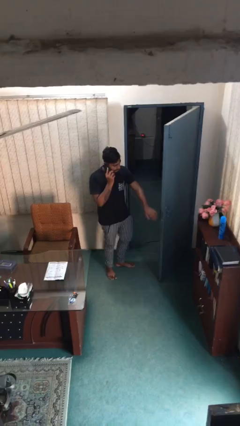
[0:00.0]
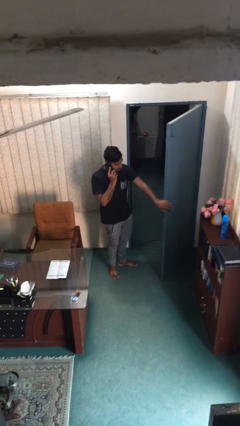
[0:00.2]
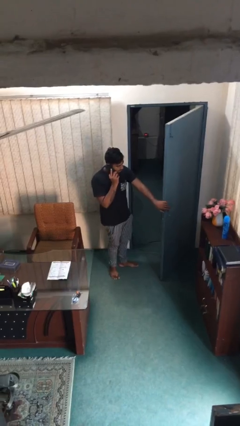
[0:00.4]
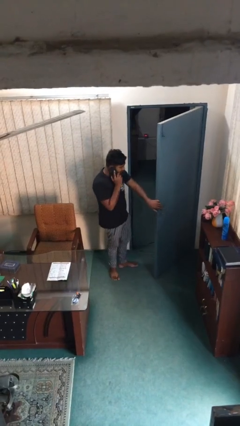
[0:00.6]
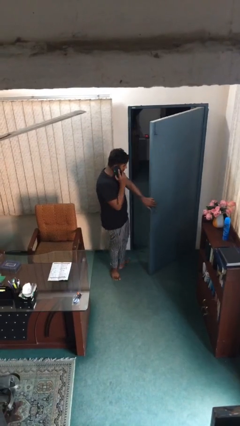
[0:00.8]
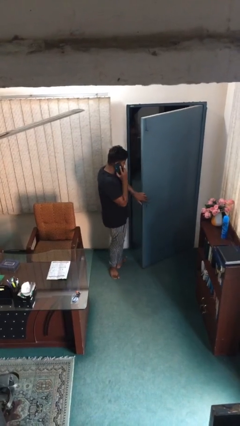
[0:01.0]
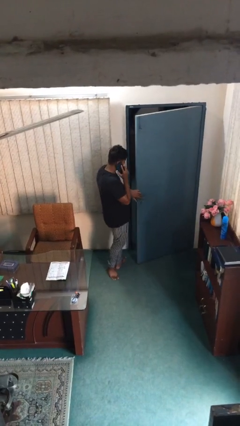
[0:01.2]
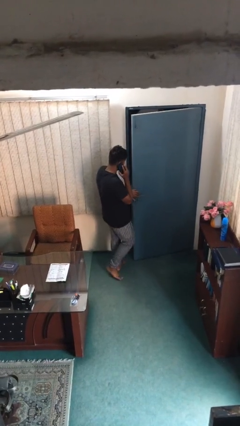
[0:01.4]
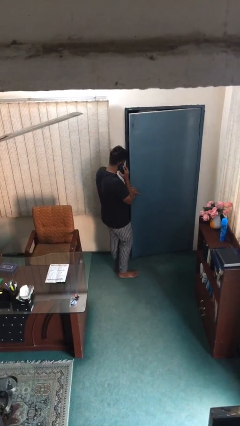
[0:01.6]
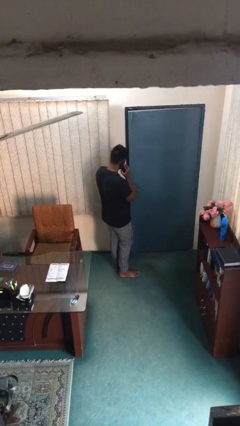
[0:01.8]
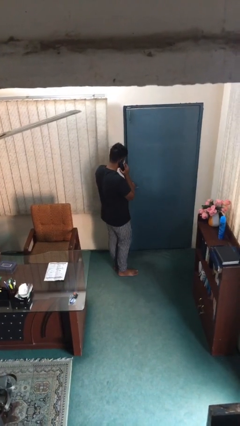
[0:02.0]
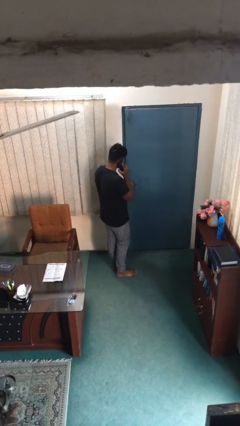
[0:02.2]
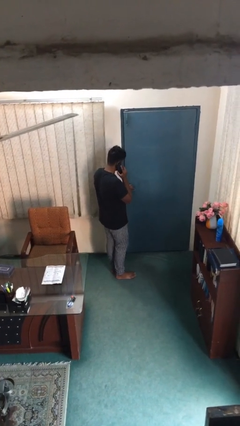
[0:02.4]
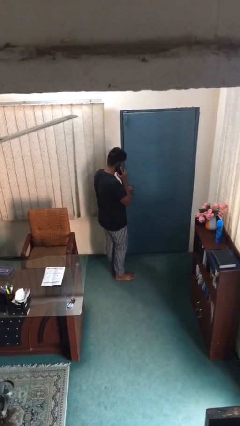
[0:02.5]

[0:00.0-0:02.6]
person closes facility door

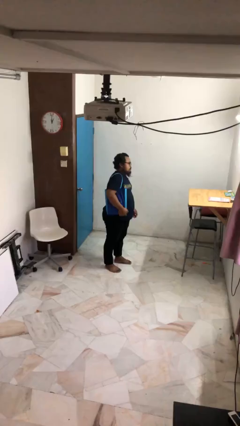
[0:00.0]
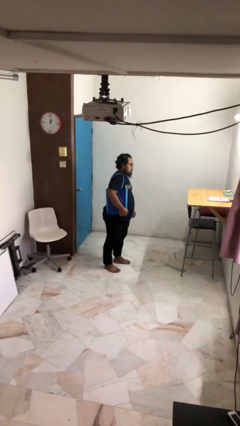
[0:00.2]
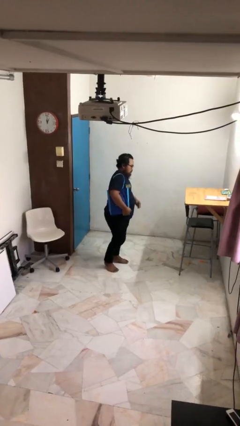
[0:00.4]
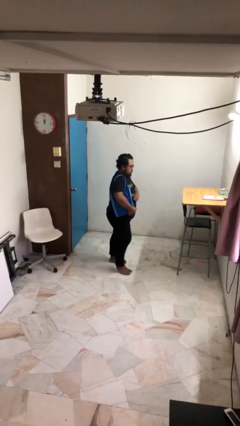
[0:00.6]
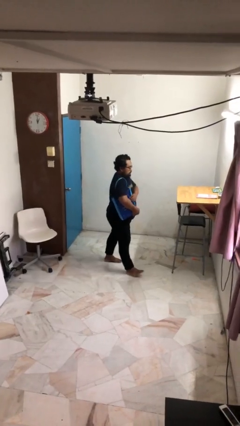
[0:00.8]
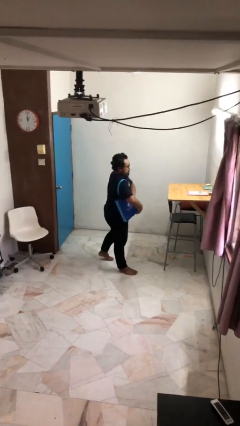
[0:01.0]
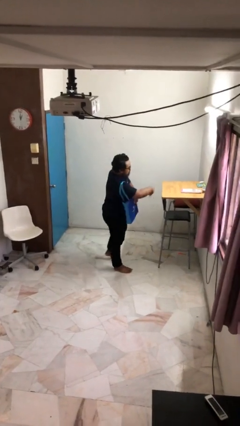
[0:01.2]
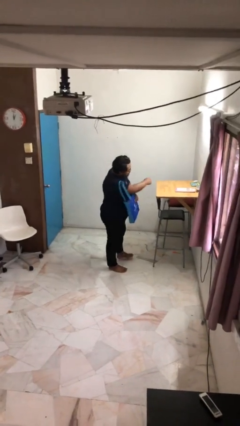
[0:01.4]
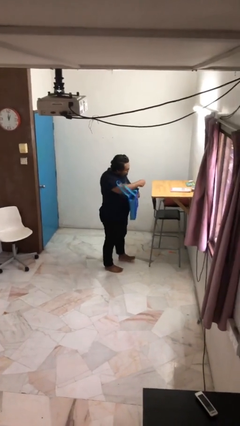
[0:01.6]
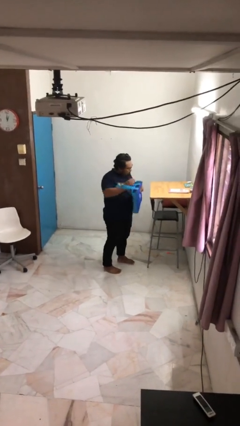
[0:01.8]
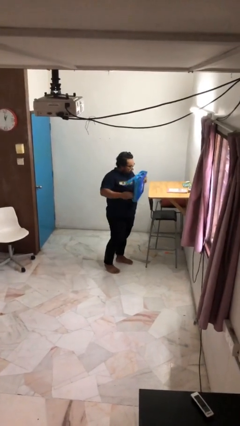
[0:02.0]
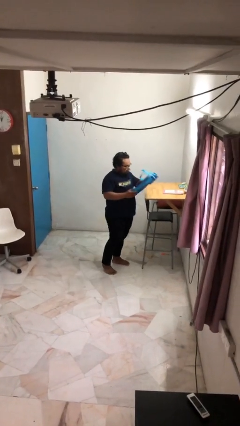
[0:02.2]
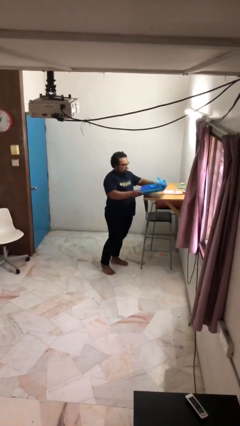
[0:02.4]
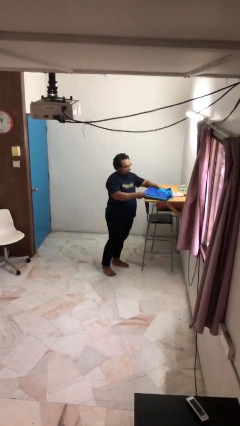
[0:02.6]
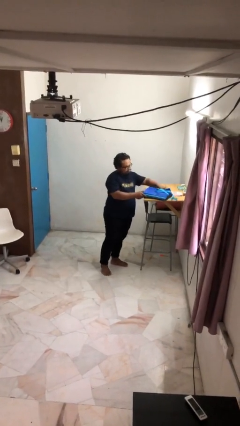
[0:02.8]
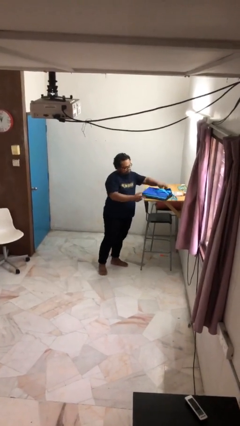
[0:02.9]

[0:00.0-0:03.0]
person puts down object on table

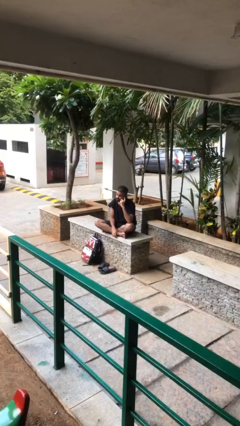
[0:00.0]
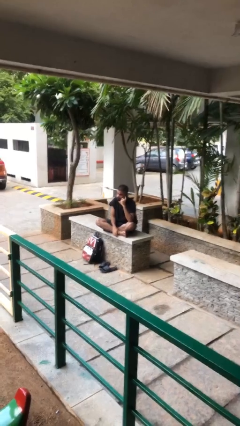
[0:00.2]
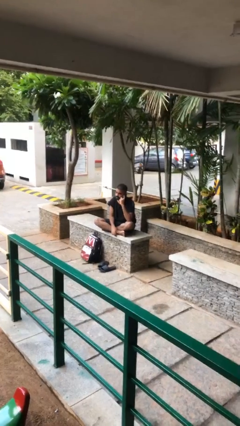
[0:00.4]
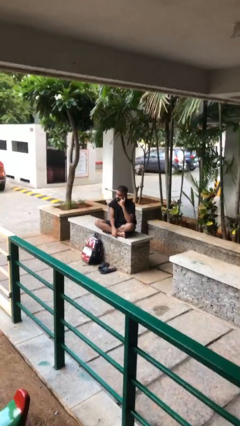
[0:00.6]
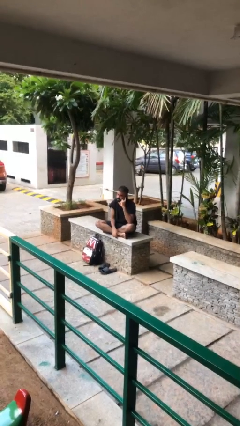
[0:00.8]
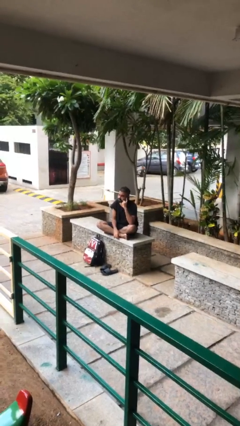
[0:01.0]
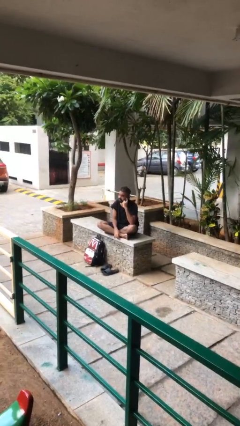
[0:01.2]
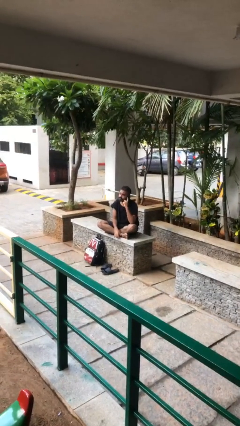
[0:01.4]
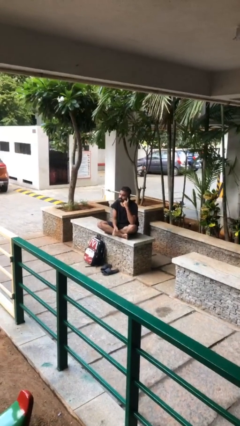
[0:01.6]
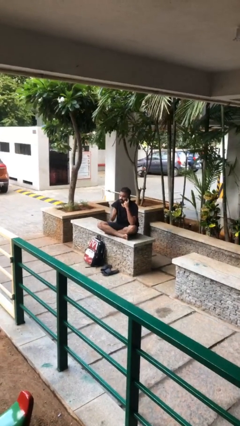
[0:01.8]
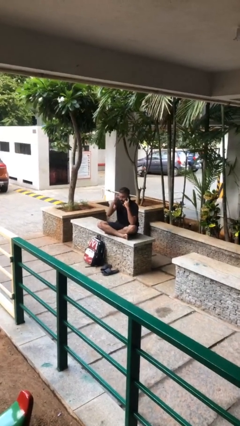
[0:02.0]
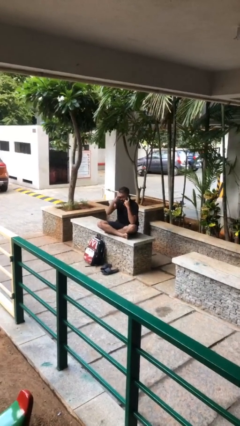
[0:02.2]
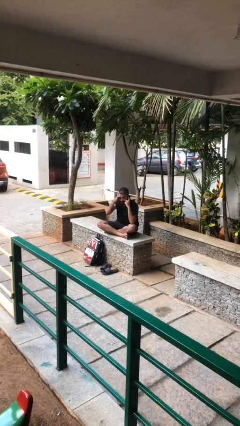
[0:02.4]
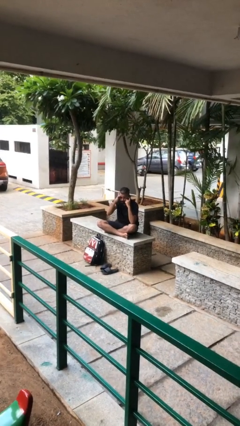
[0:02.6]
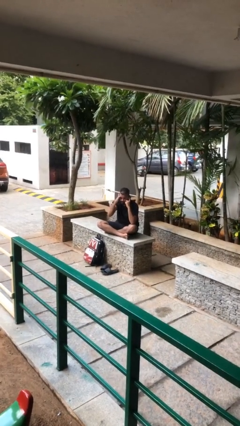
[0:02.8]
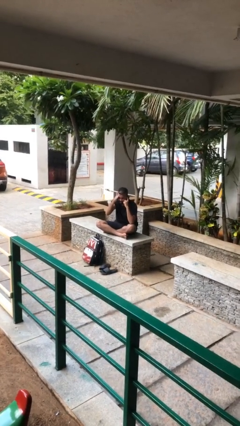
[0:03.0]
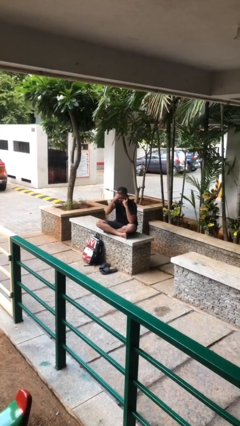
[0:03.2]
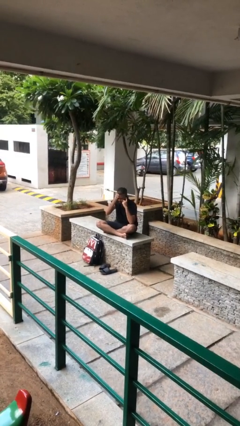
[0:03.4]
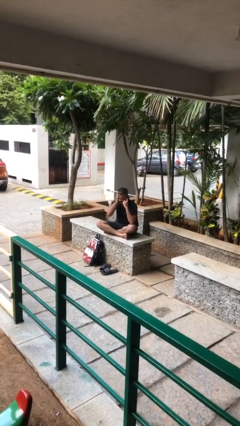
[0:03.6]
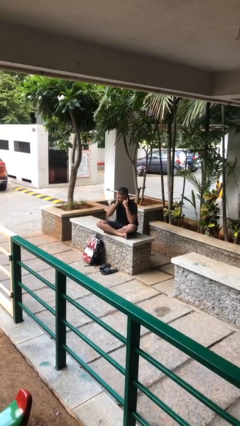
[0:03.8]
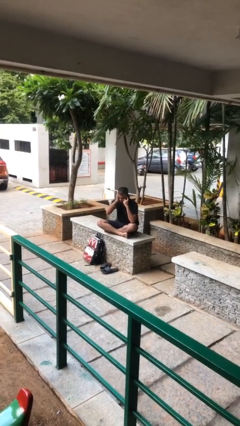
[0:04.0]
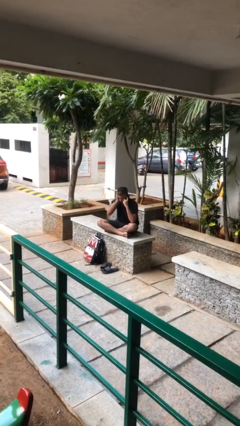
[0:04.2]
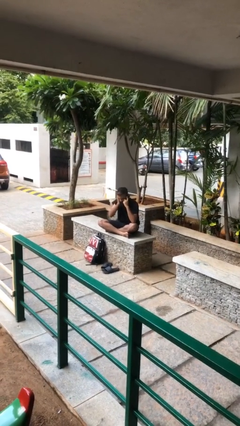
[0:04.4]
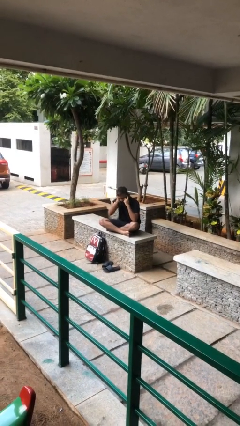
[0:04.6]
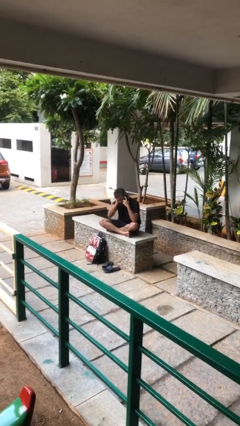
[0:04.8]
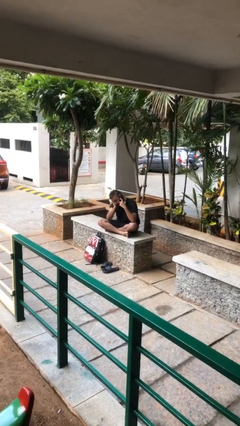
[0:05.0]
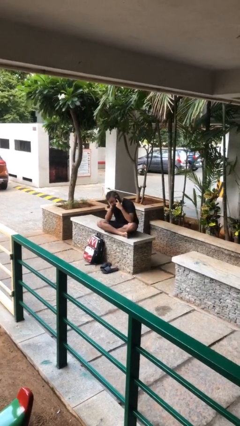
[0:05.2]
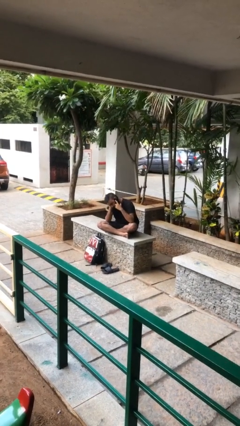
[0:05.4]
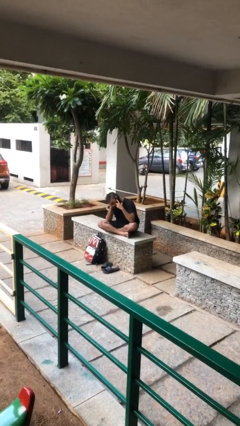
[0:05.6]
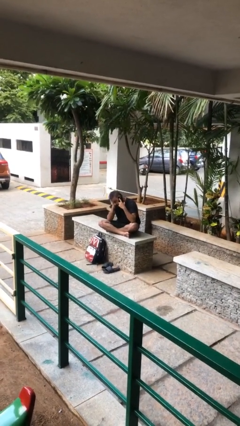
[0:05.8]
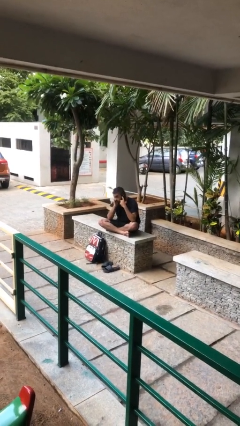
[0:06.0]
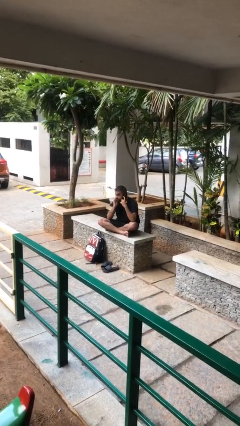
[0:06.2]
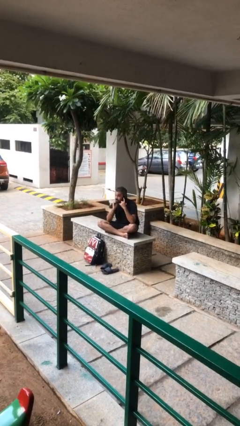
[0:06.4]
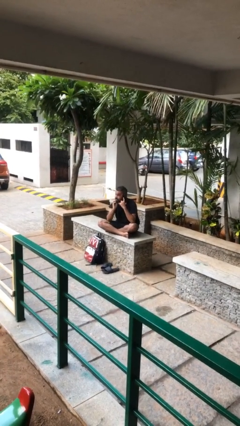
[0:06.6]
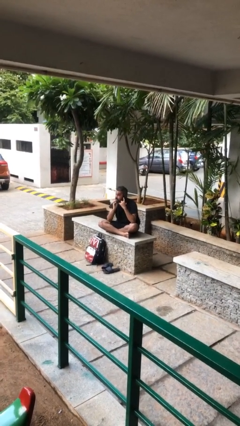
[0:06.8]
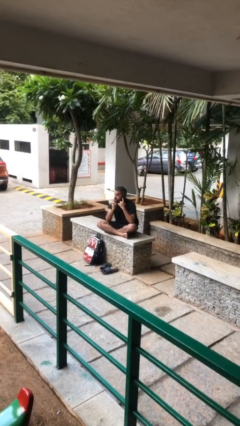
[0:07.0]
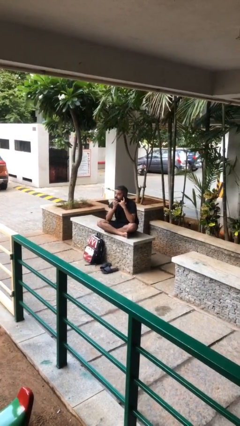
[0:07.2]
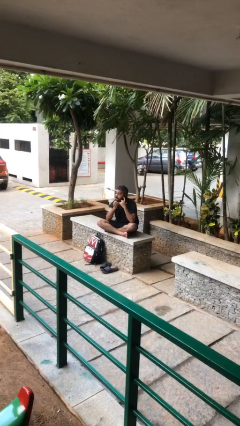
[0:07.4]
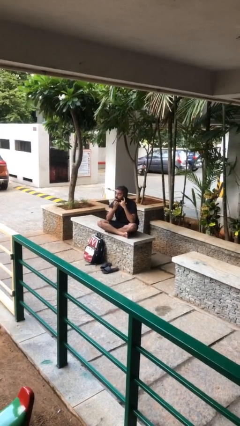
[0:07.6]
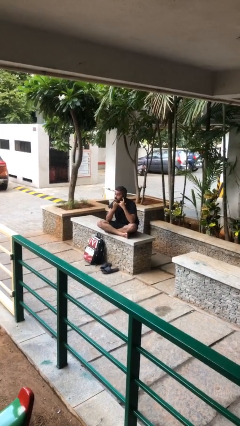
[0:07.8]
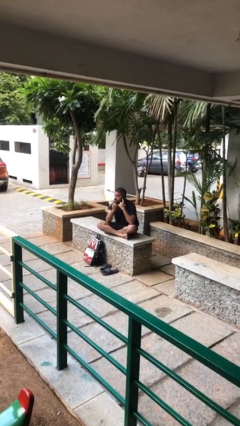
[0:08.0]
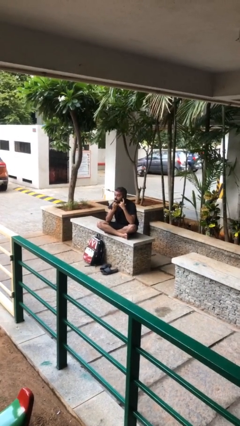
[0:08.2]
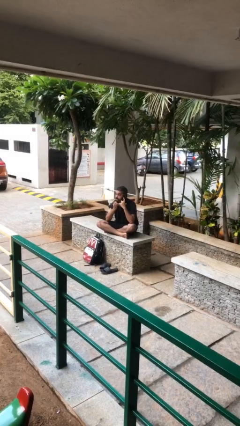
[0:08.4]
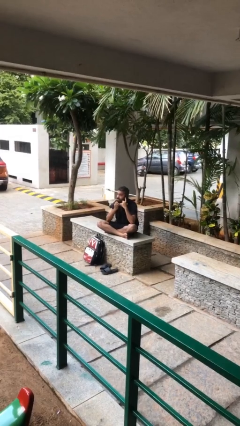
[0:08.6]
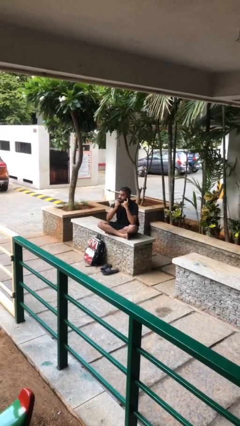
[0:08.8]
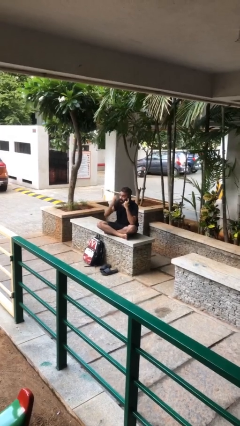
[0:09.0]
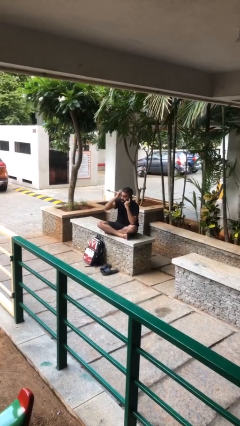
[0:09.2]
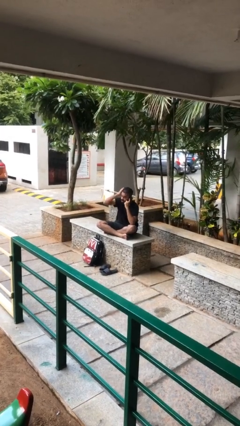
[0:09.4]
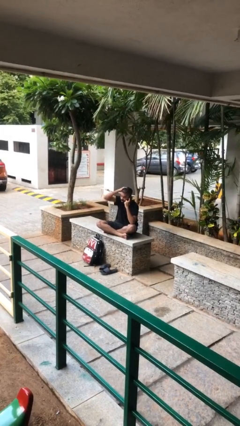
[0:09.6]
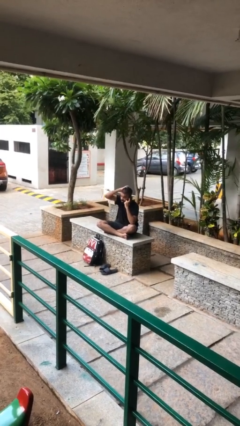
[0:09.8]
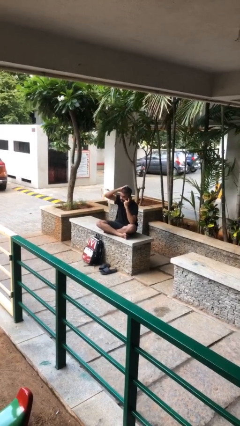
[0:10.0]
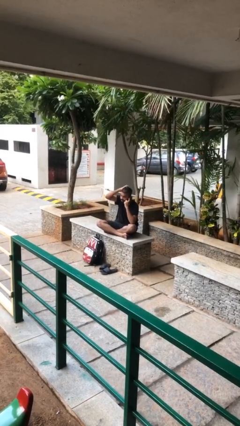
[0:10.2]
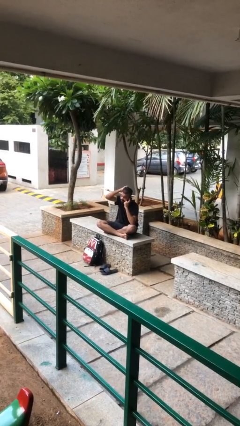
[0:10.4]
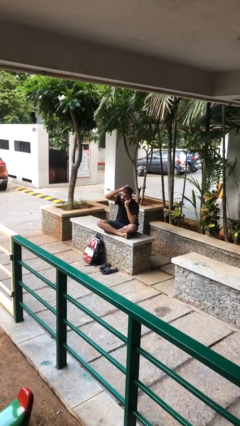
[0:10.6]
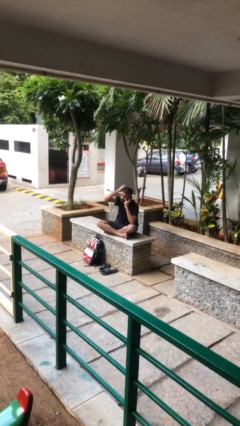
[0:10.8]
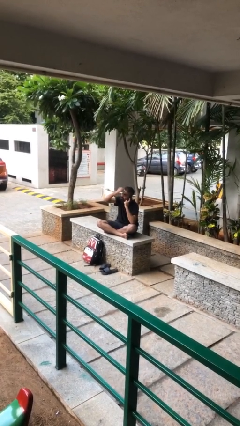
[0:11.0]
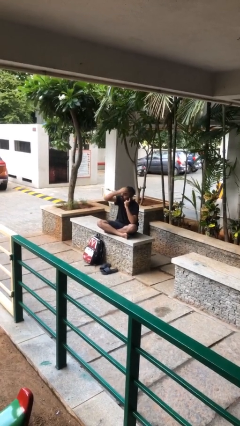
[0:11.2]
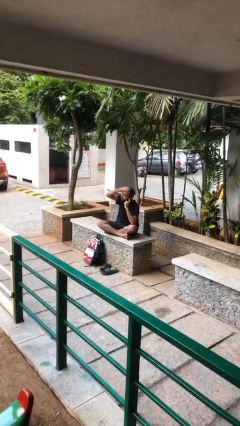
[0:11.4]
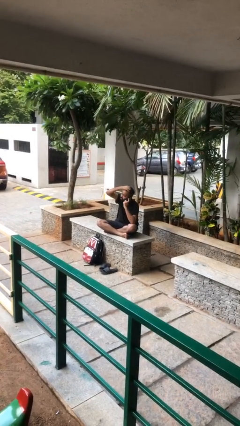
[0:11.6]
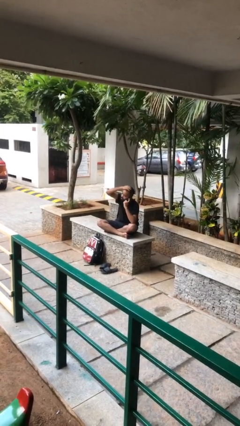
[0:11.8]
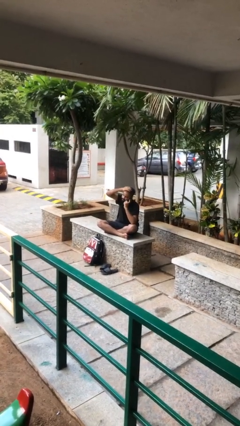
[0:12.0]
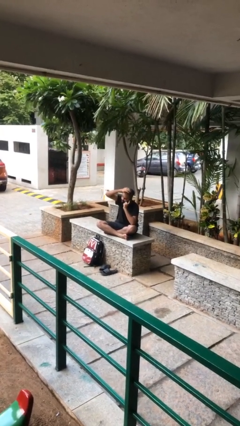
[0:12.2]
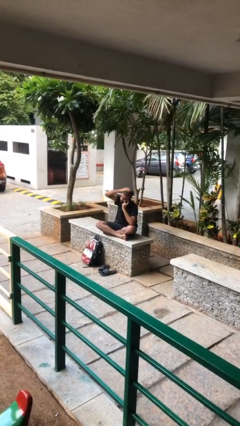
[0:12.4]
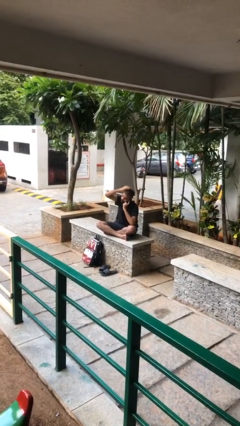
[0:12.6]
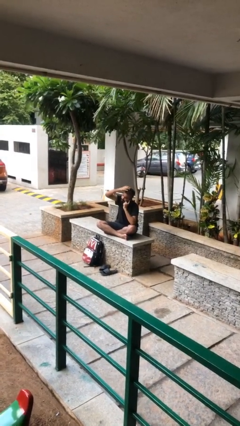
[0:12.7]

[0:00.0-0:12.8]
person talks on phone
